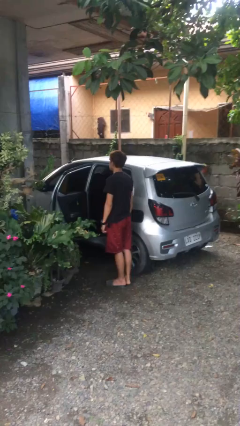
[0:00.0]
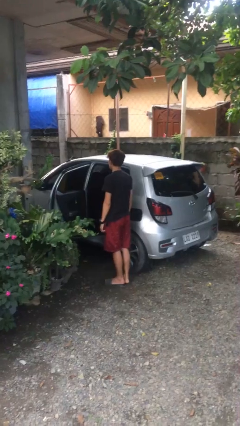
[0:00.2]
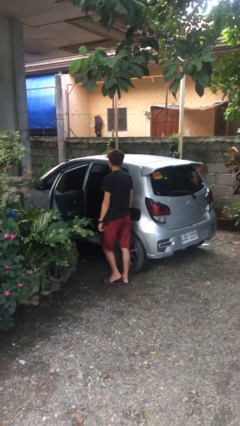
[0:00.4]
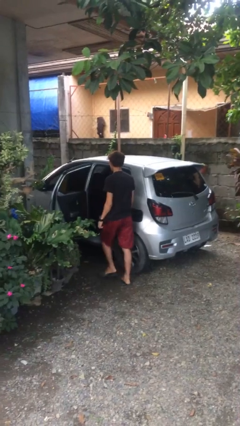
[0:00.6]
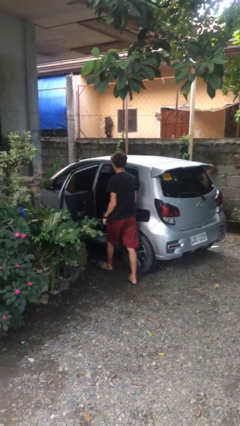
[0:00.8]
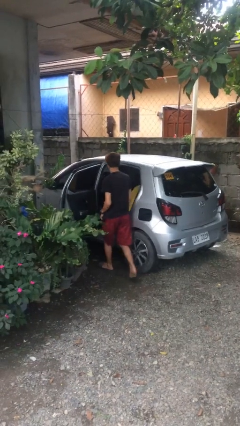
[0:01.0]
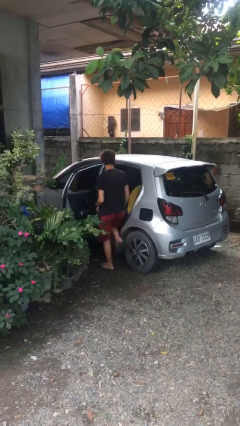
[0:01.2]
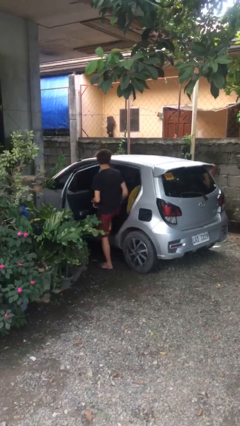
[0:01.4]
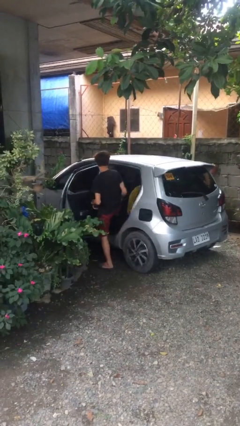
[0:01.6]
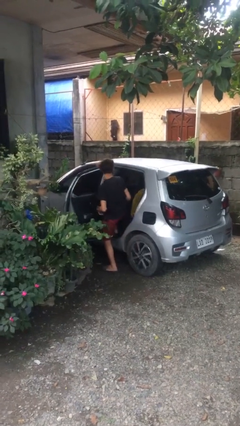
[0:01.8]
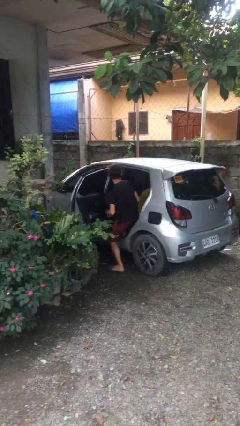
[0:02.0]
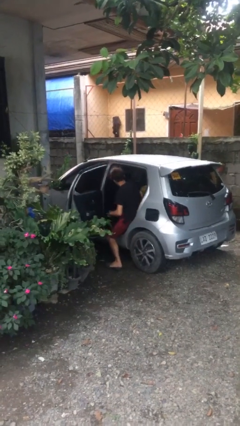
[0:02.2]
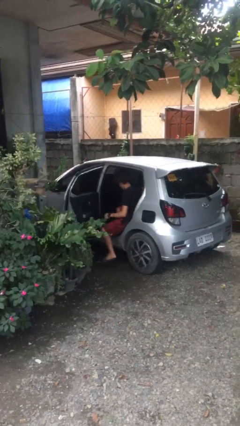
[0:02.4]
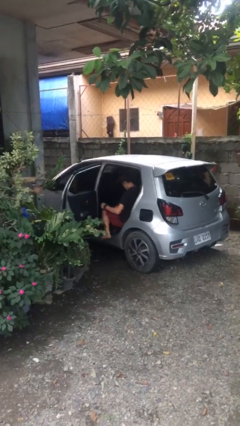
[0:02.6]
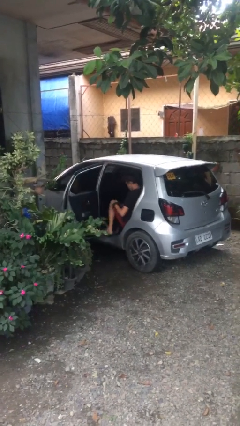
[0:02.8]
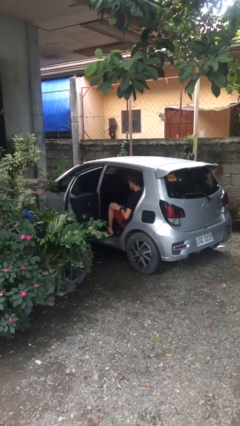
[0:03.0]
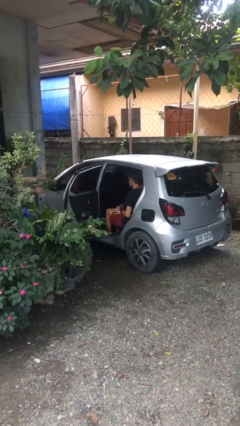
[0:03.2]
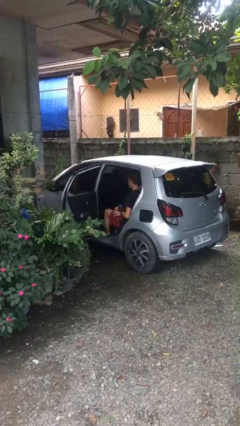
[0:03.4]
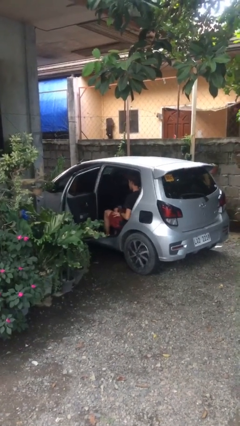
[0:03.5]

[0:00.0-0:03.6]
person enters car

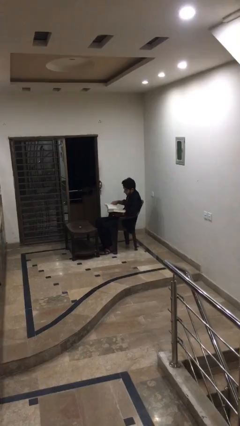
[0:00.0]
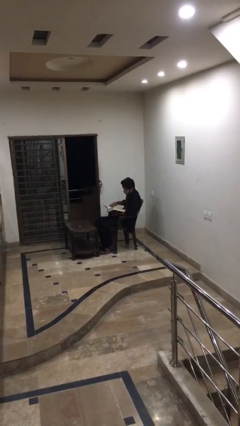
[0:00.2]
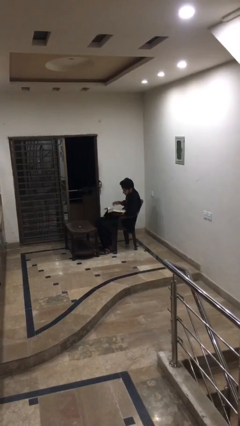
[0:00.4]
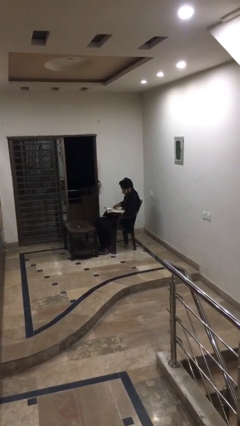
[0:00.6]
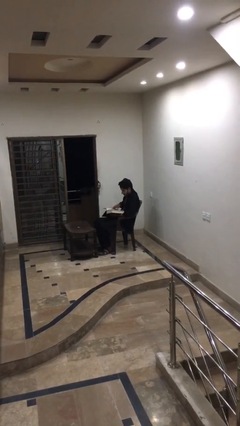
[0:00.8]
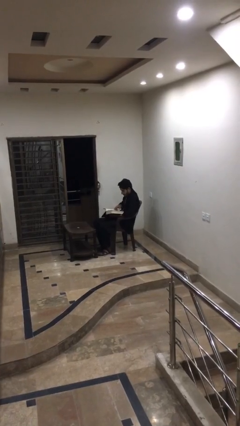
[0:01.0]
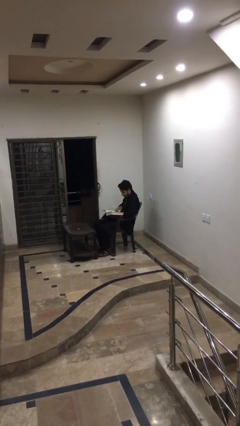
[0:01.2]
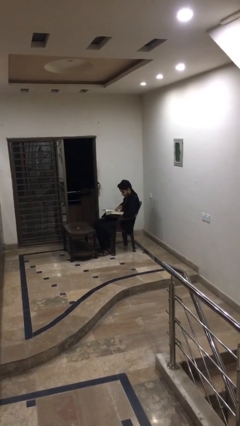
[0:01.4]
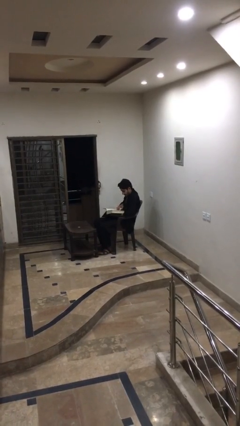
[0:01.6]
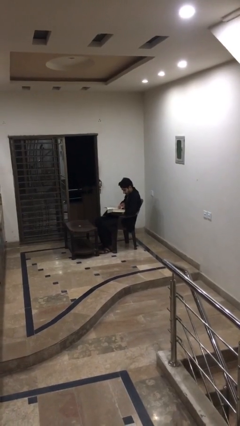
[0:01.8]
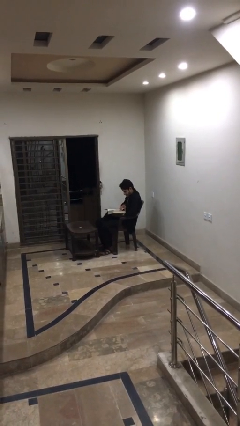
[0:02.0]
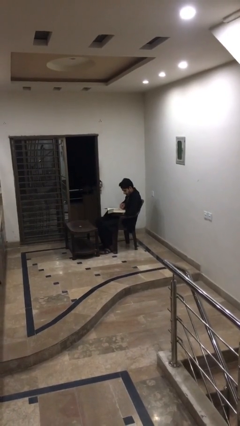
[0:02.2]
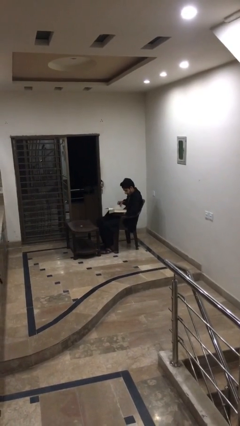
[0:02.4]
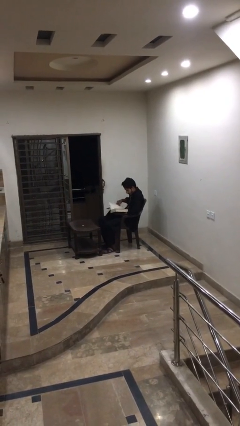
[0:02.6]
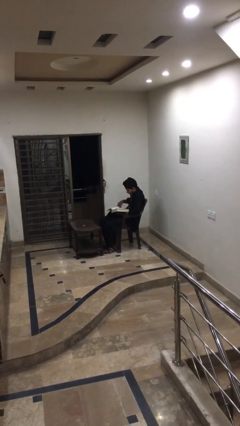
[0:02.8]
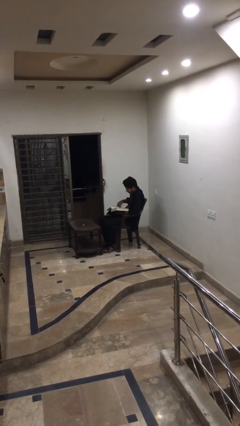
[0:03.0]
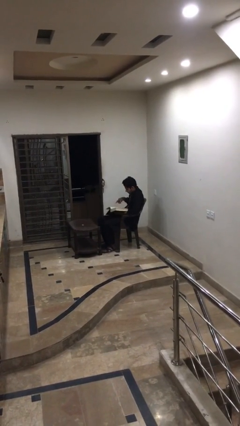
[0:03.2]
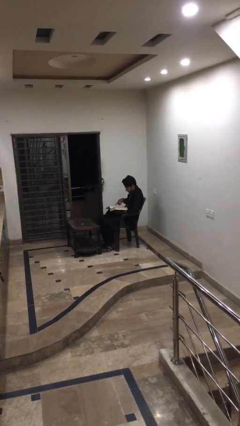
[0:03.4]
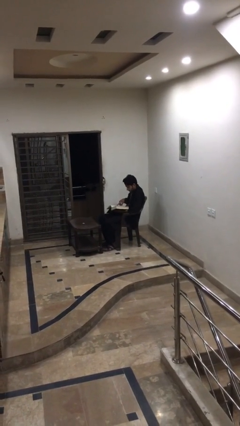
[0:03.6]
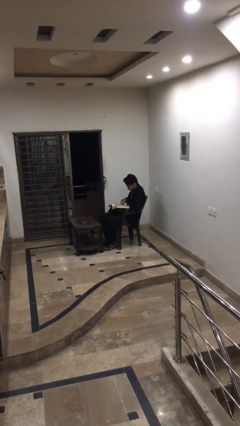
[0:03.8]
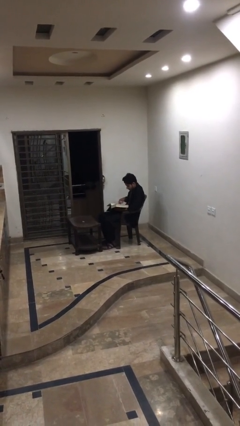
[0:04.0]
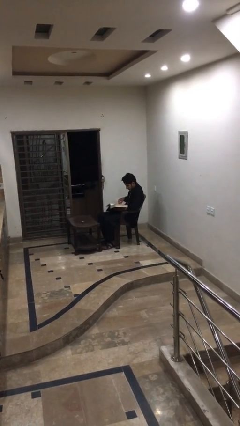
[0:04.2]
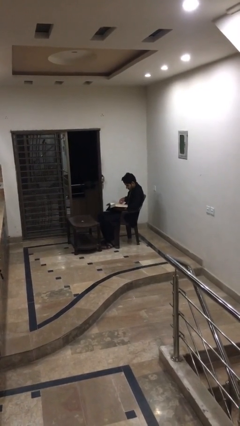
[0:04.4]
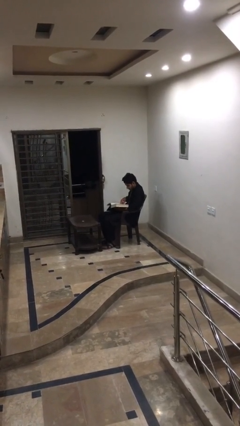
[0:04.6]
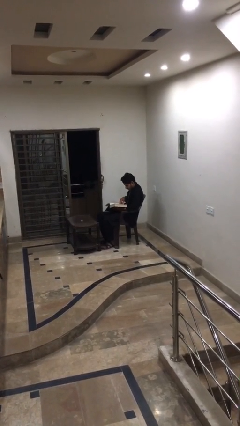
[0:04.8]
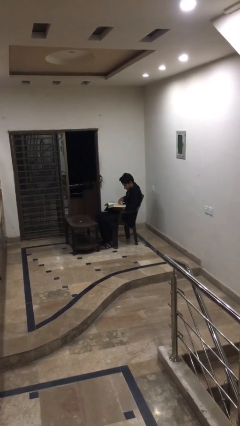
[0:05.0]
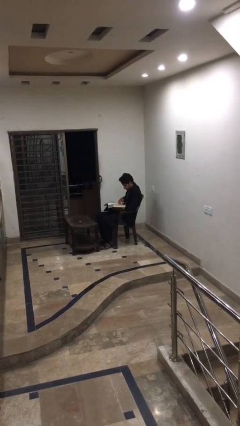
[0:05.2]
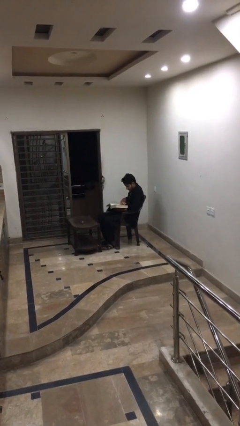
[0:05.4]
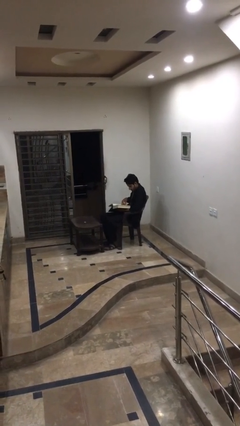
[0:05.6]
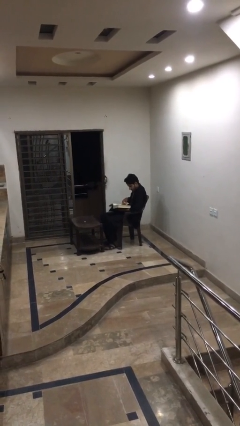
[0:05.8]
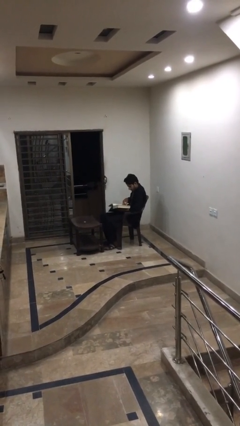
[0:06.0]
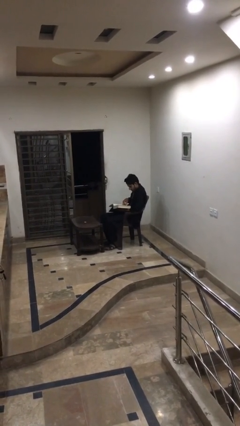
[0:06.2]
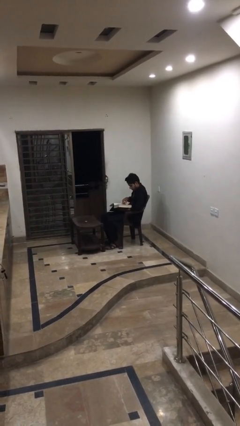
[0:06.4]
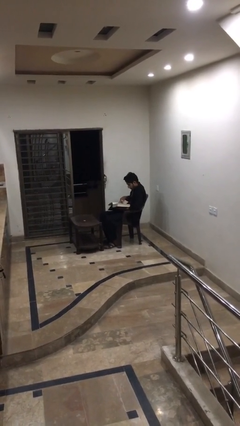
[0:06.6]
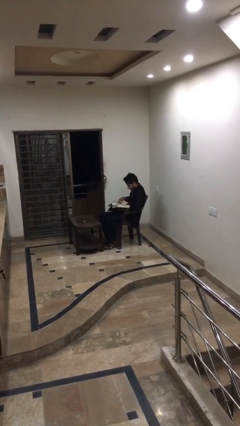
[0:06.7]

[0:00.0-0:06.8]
person reads document

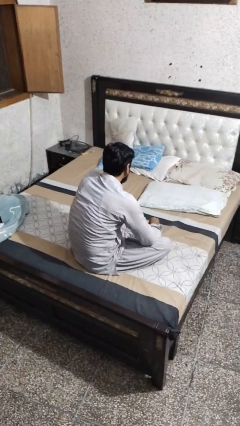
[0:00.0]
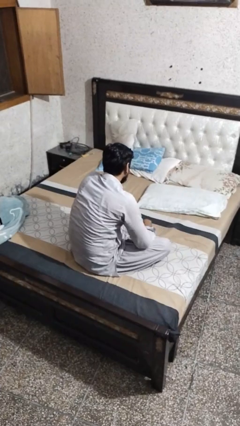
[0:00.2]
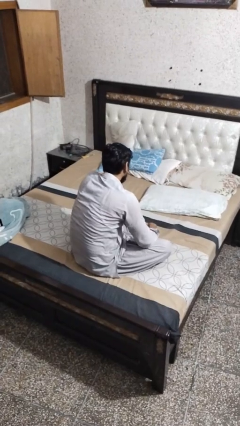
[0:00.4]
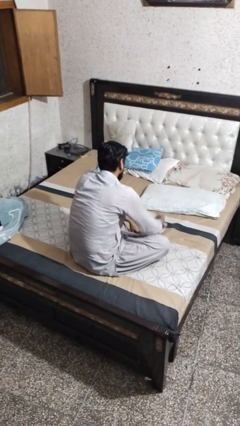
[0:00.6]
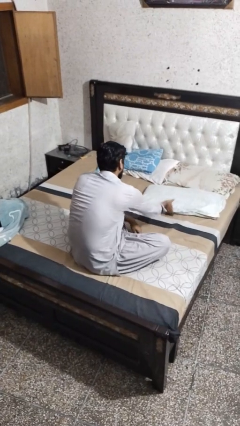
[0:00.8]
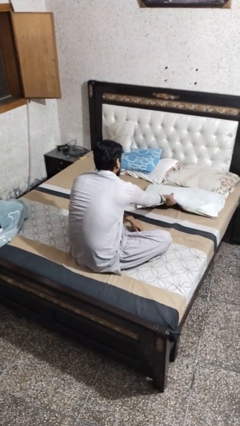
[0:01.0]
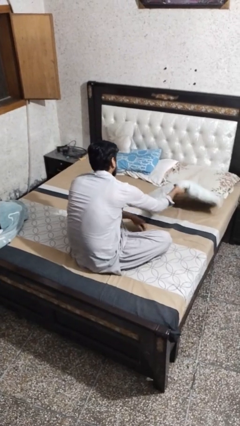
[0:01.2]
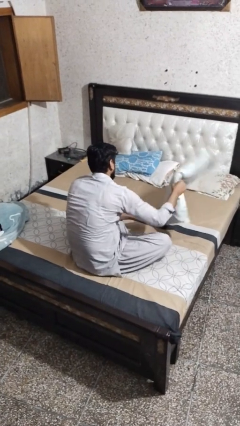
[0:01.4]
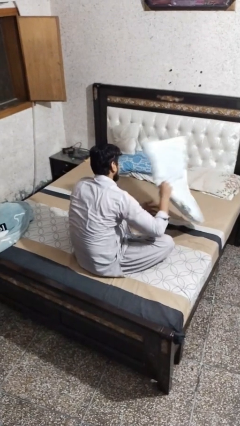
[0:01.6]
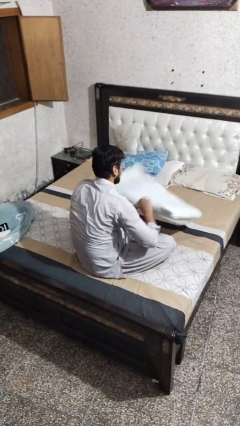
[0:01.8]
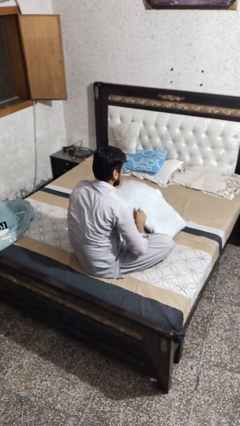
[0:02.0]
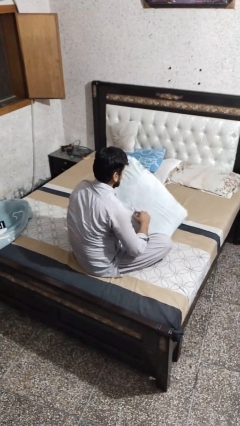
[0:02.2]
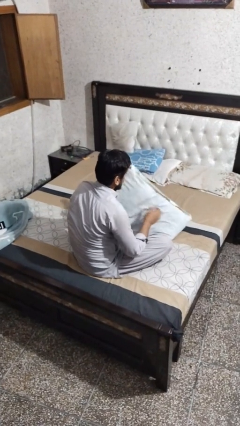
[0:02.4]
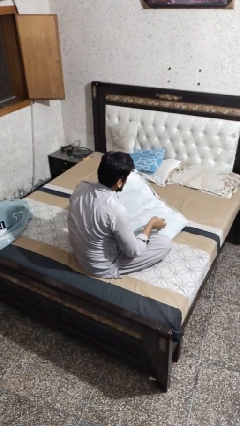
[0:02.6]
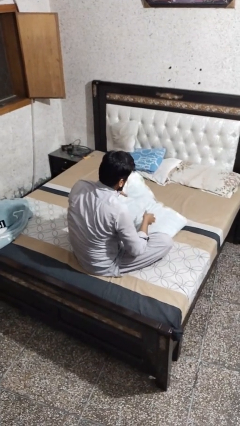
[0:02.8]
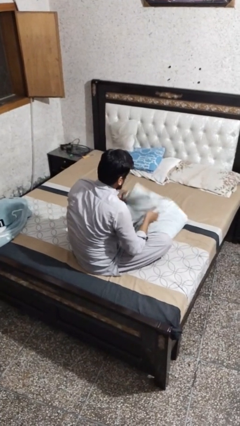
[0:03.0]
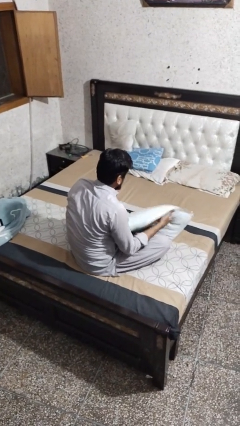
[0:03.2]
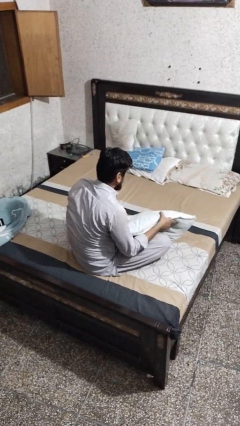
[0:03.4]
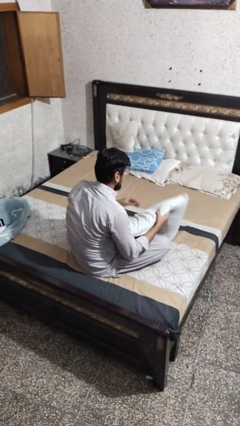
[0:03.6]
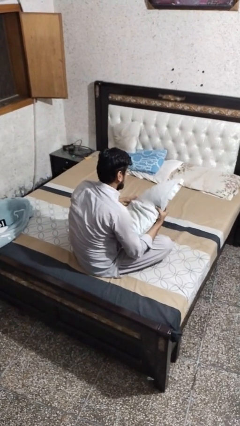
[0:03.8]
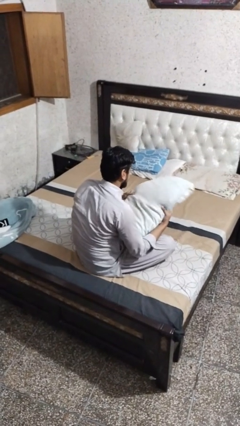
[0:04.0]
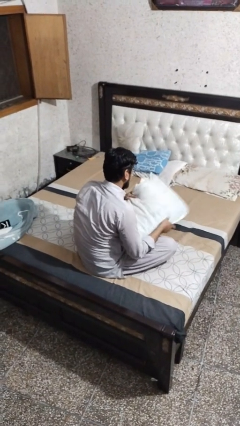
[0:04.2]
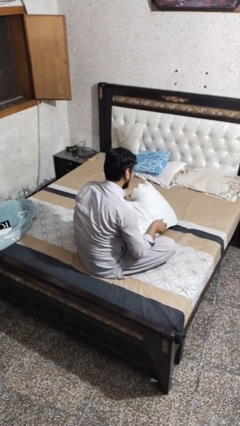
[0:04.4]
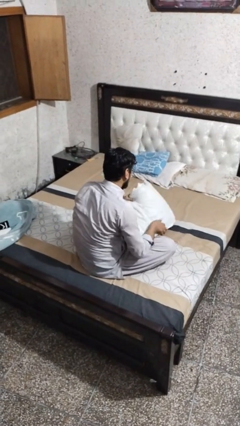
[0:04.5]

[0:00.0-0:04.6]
person picks up object from bed

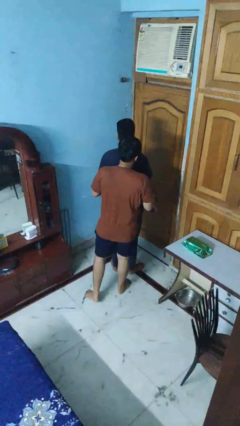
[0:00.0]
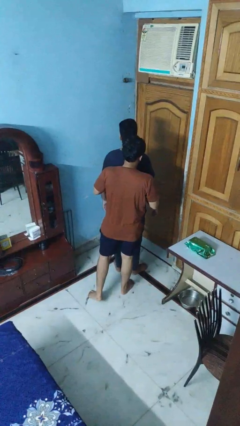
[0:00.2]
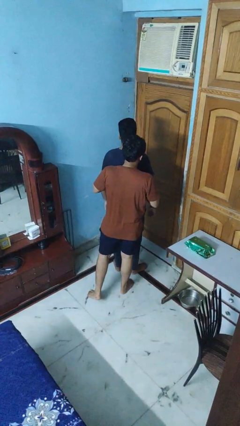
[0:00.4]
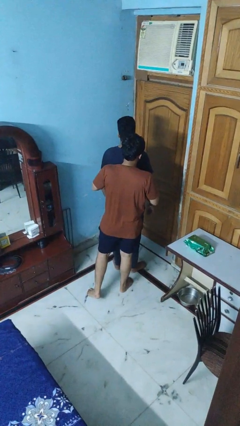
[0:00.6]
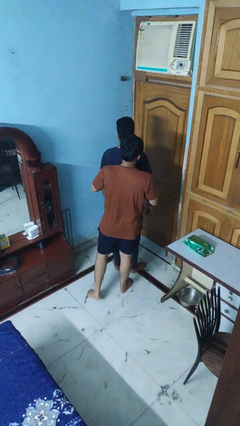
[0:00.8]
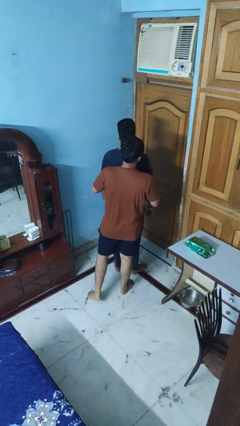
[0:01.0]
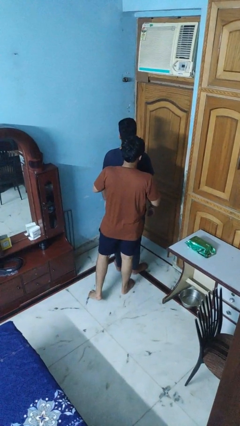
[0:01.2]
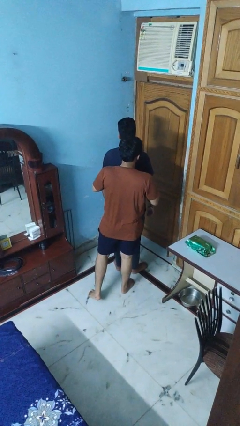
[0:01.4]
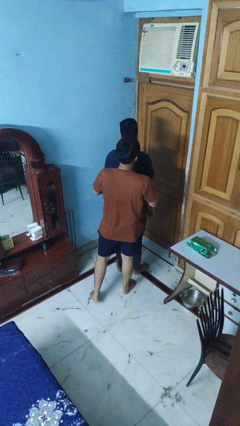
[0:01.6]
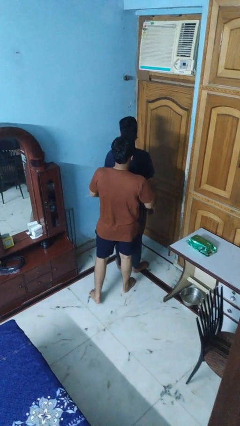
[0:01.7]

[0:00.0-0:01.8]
person hugs person from behind

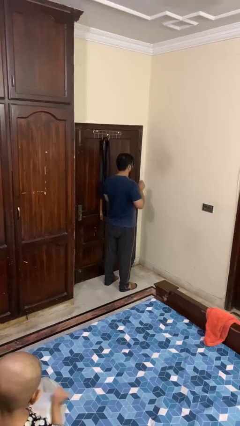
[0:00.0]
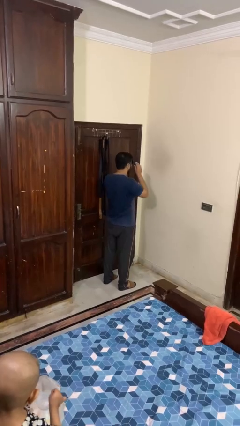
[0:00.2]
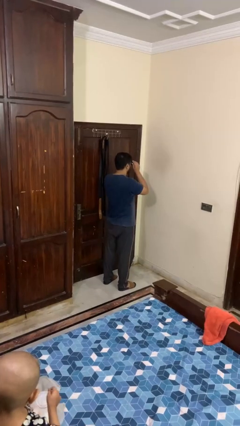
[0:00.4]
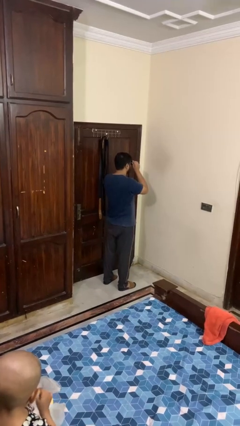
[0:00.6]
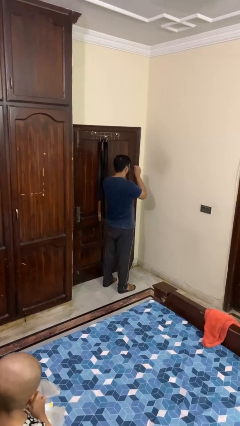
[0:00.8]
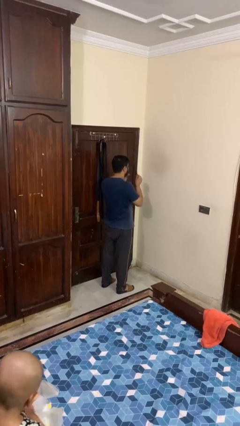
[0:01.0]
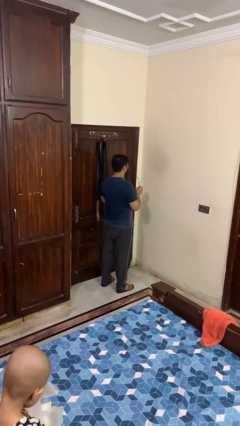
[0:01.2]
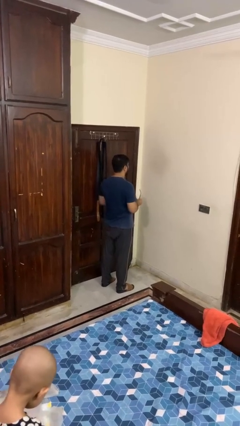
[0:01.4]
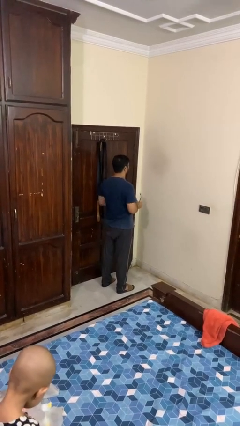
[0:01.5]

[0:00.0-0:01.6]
person takes off sunglasses
